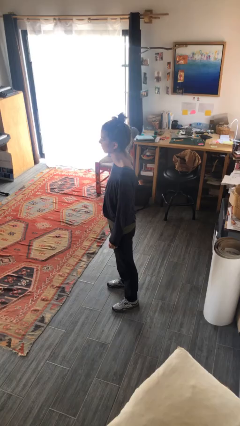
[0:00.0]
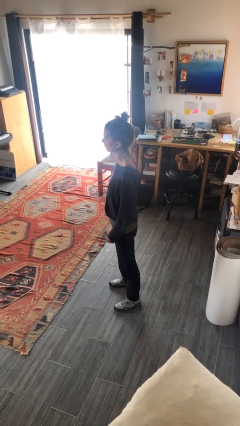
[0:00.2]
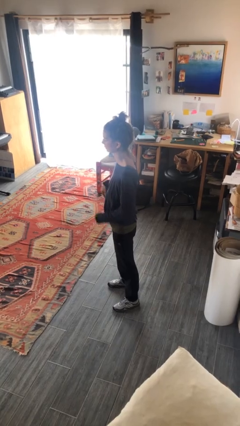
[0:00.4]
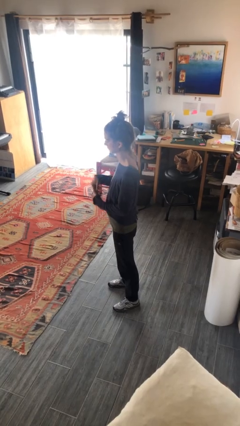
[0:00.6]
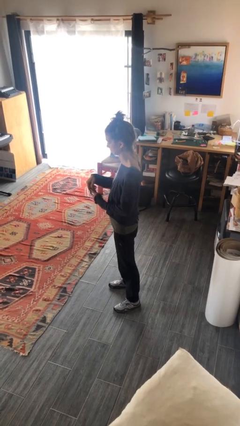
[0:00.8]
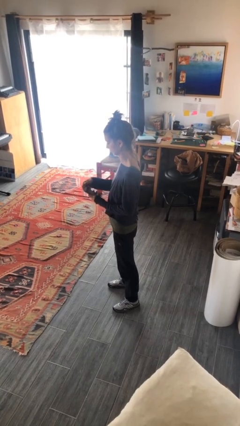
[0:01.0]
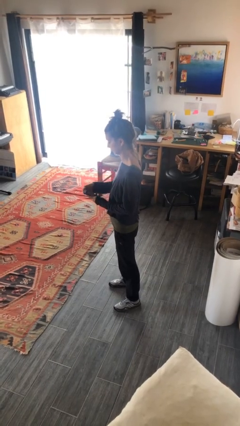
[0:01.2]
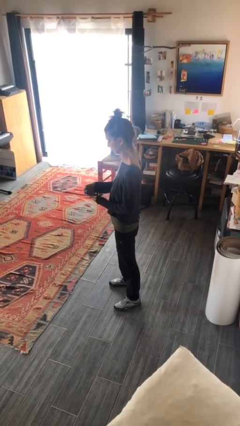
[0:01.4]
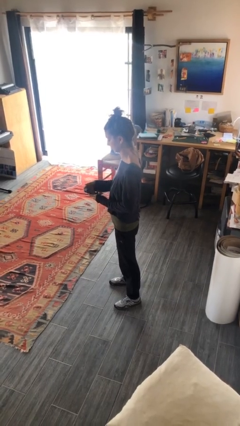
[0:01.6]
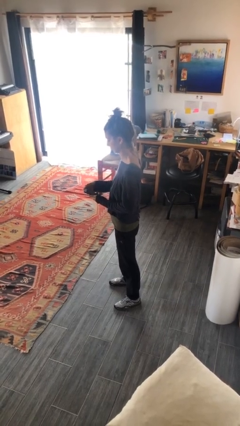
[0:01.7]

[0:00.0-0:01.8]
person takes phone from pocket

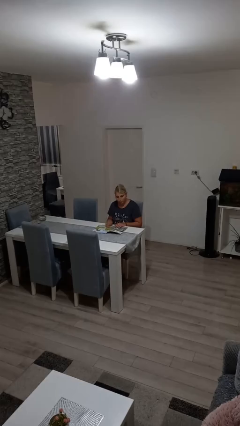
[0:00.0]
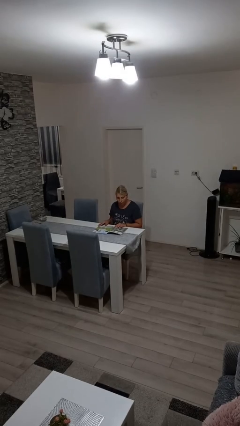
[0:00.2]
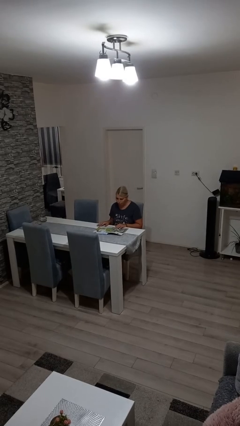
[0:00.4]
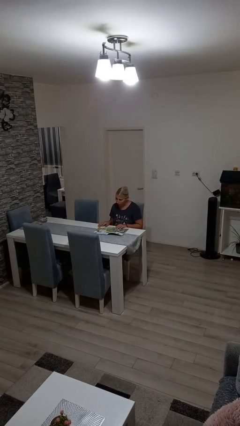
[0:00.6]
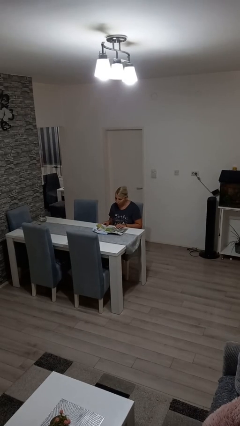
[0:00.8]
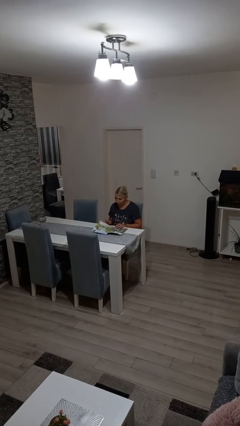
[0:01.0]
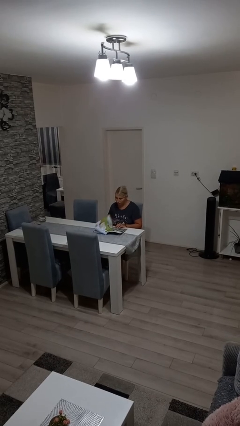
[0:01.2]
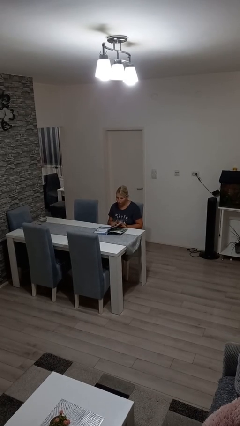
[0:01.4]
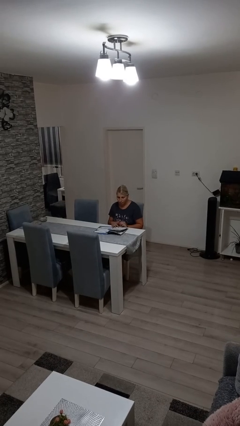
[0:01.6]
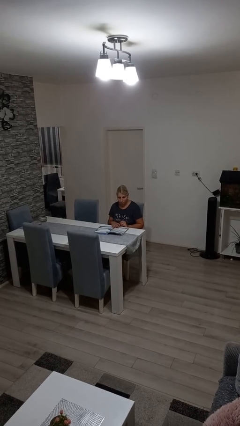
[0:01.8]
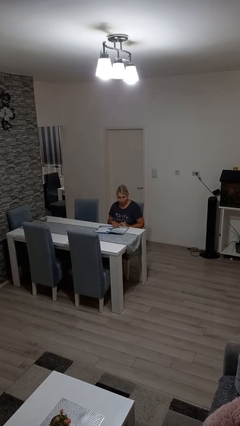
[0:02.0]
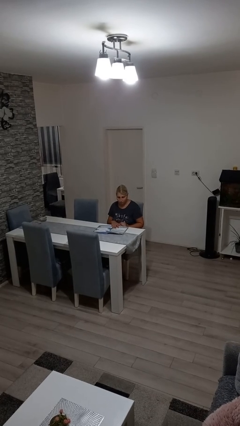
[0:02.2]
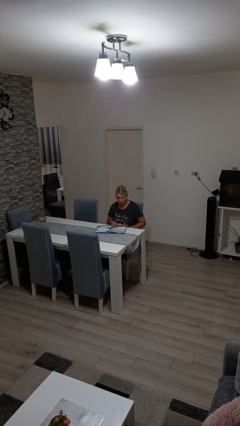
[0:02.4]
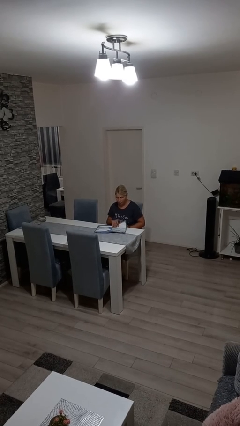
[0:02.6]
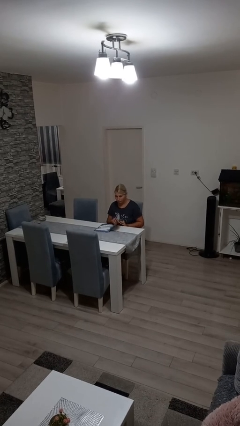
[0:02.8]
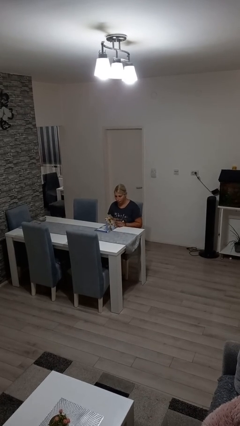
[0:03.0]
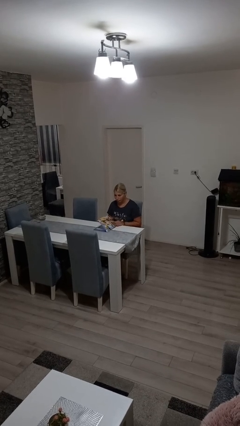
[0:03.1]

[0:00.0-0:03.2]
person reads magazine

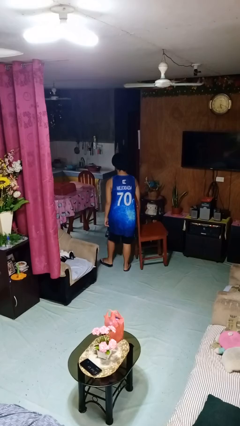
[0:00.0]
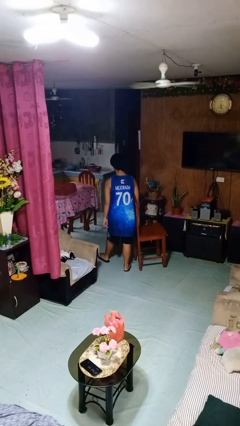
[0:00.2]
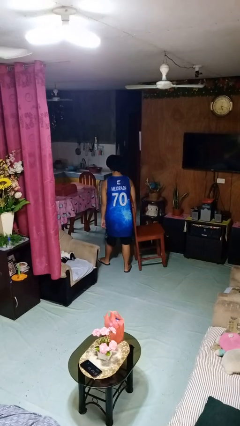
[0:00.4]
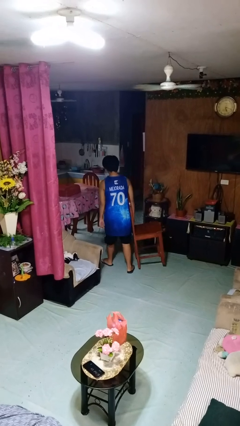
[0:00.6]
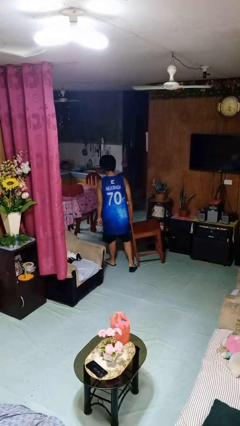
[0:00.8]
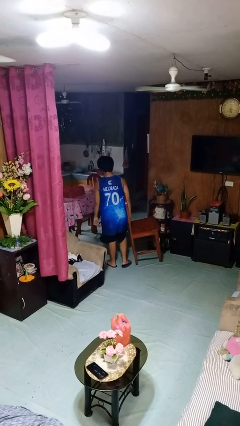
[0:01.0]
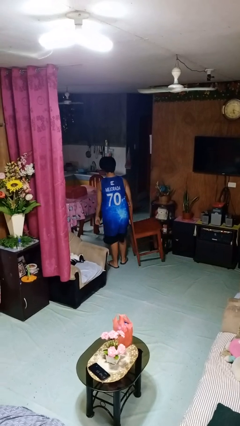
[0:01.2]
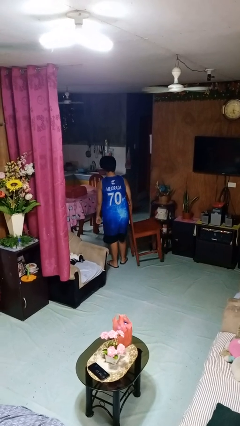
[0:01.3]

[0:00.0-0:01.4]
person carries furniture

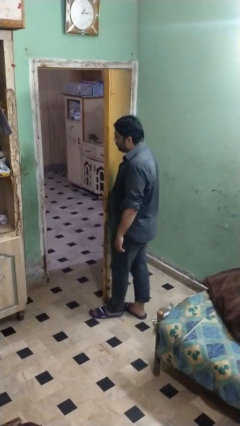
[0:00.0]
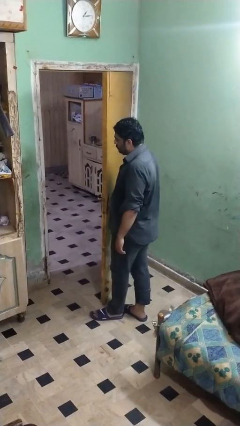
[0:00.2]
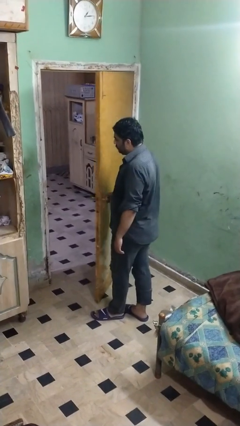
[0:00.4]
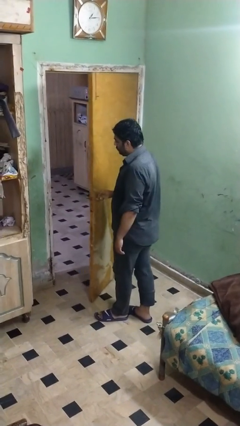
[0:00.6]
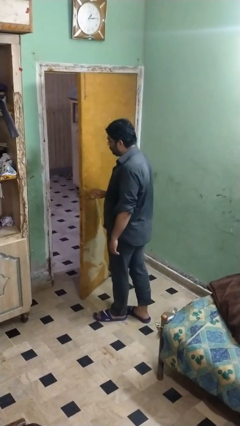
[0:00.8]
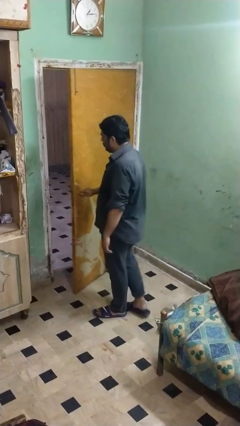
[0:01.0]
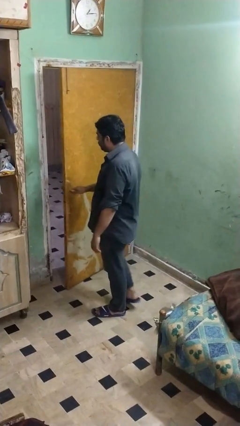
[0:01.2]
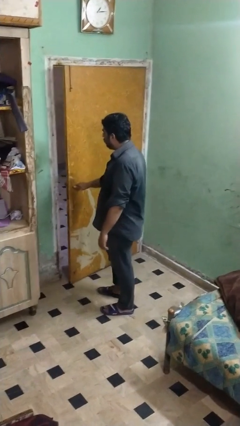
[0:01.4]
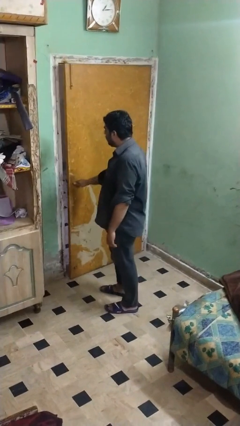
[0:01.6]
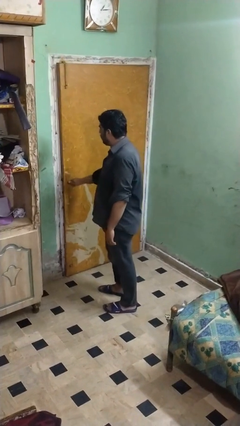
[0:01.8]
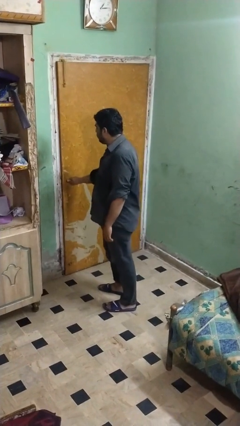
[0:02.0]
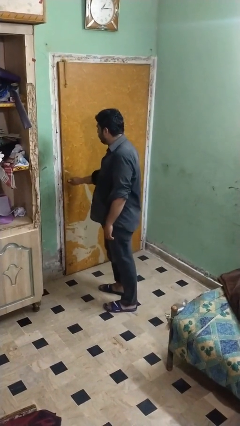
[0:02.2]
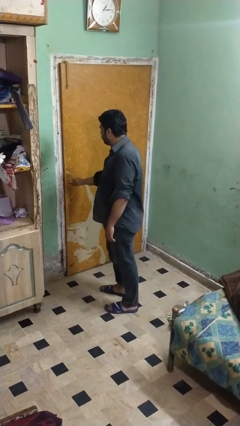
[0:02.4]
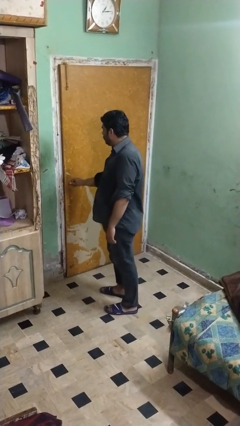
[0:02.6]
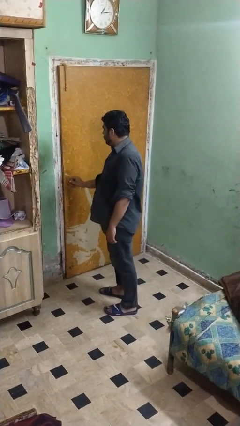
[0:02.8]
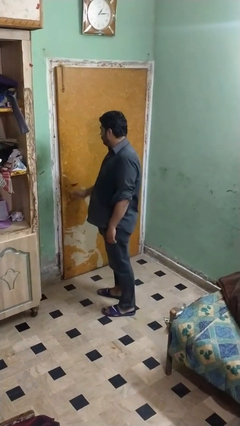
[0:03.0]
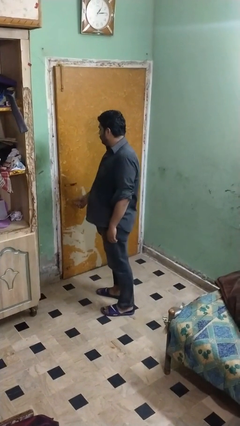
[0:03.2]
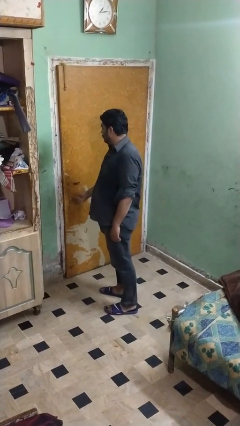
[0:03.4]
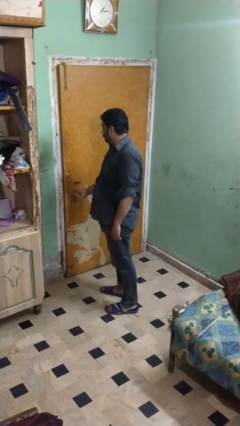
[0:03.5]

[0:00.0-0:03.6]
person closes facility door

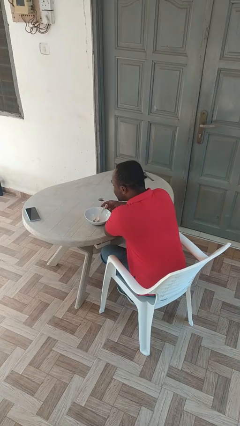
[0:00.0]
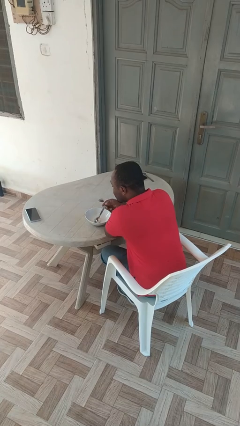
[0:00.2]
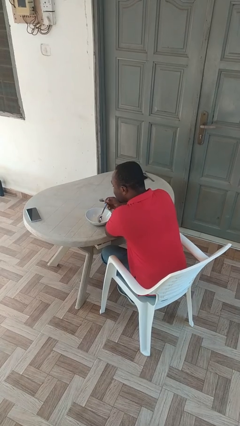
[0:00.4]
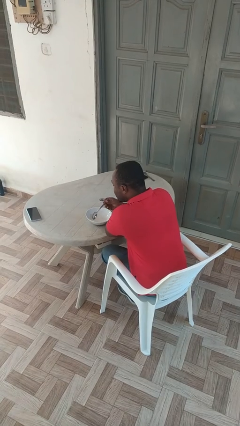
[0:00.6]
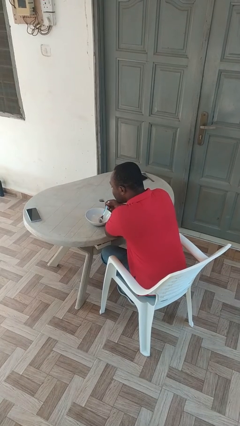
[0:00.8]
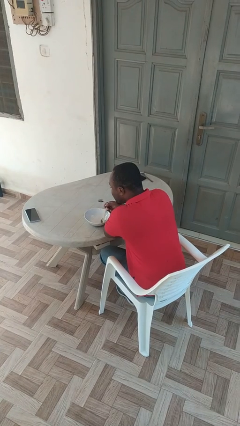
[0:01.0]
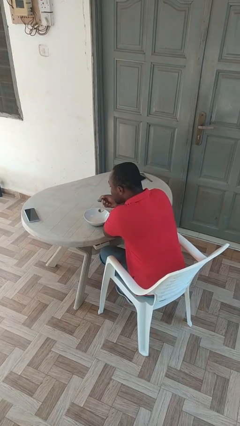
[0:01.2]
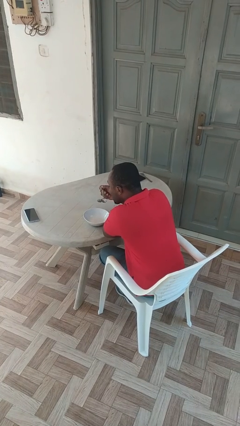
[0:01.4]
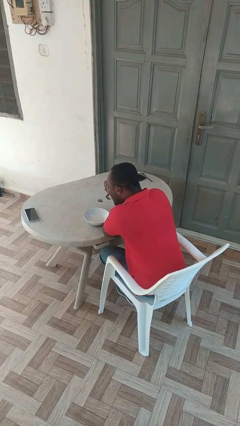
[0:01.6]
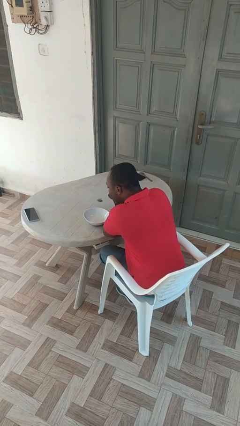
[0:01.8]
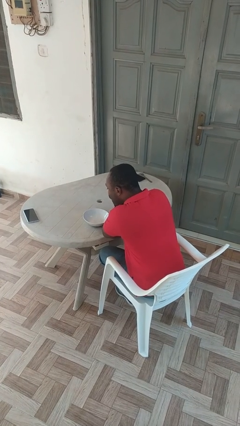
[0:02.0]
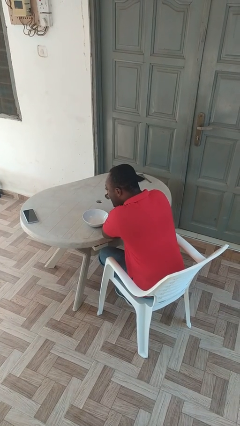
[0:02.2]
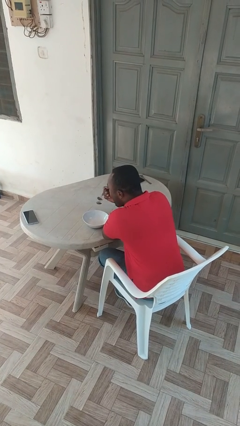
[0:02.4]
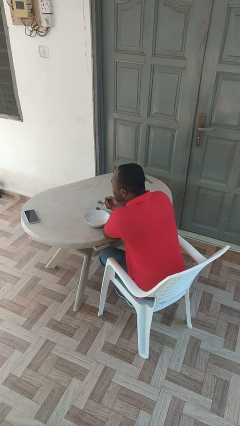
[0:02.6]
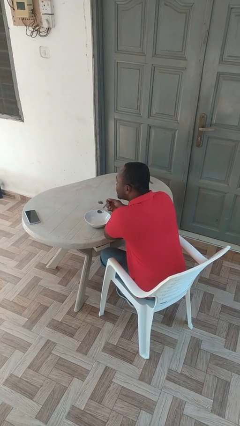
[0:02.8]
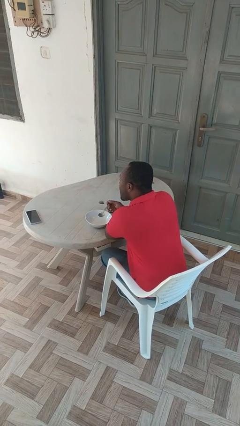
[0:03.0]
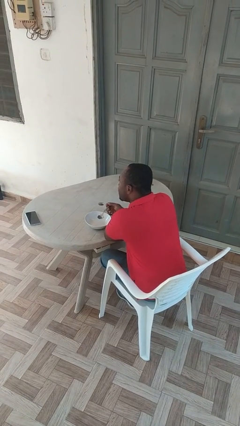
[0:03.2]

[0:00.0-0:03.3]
person eats with utensil

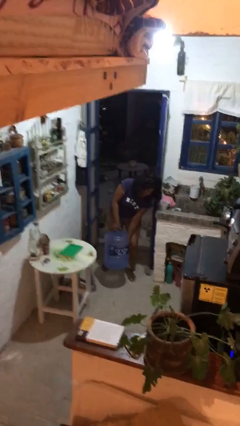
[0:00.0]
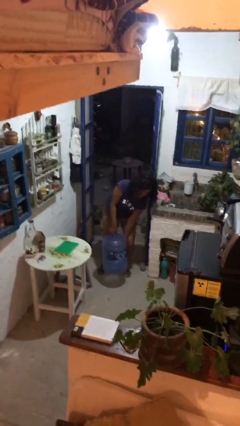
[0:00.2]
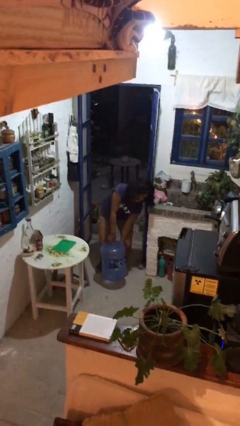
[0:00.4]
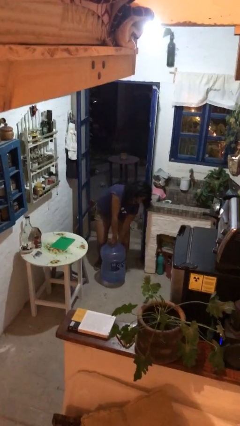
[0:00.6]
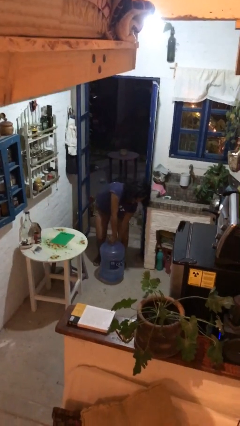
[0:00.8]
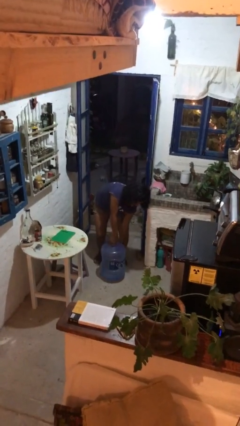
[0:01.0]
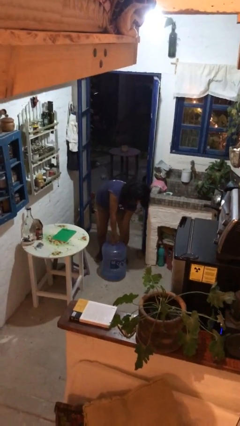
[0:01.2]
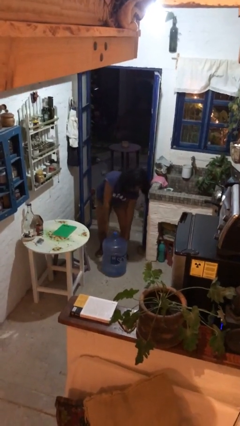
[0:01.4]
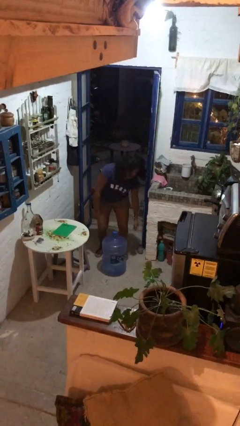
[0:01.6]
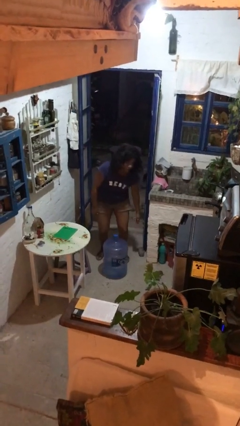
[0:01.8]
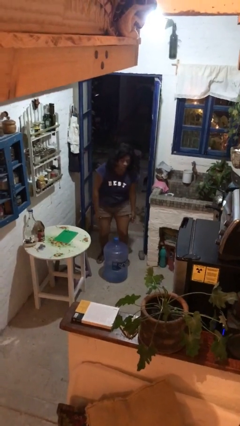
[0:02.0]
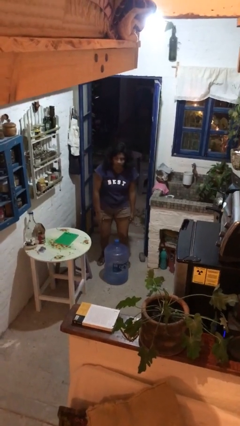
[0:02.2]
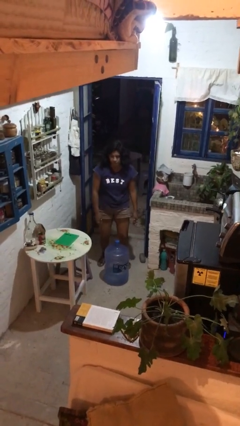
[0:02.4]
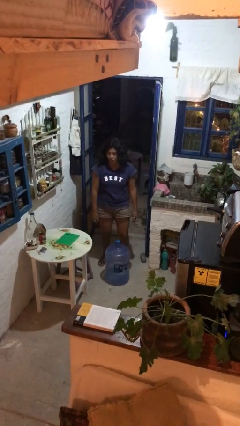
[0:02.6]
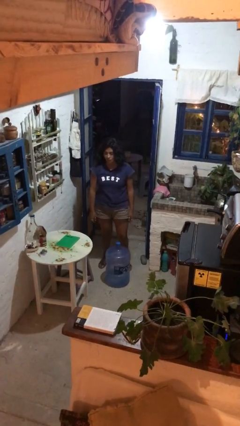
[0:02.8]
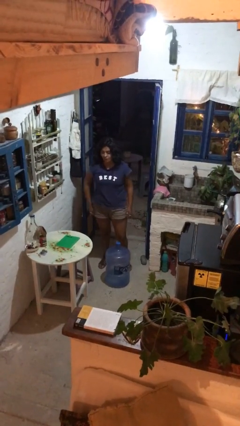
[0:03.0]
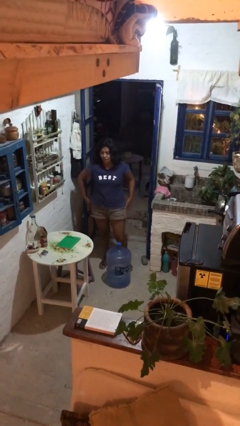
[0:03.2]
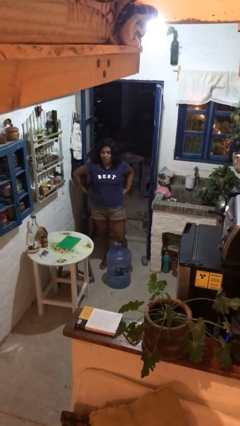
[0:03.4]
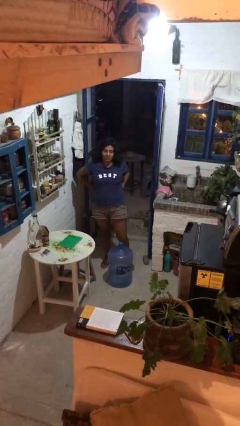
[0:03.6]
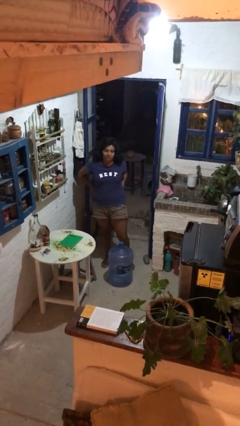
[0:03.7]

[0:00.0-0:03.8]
person puts down object on floor

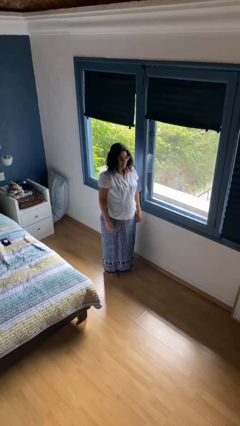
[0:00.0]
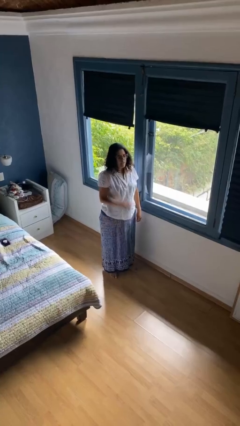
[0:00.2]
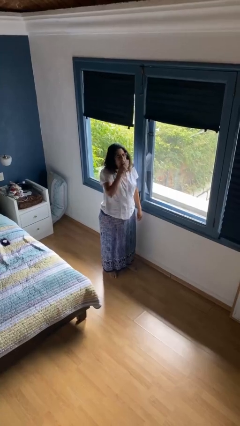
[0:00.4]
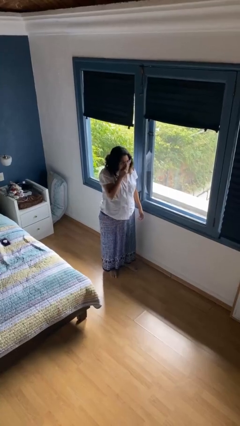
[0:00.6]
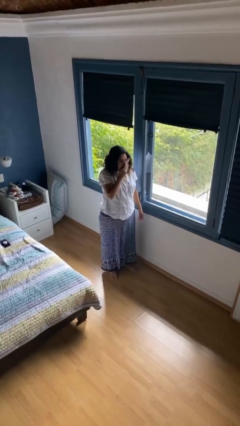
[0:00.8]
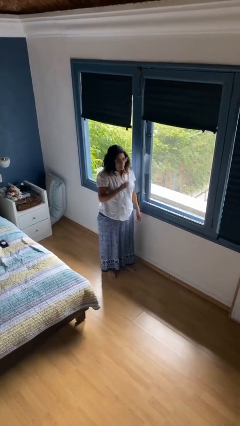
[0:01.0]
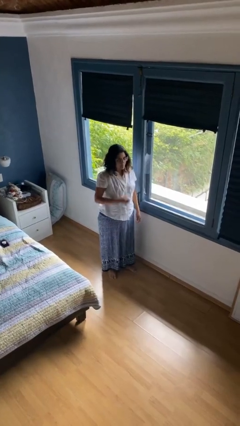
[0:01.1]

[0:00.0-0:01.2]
person sneezes into hand
